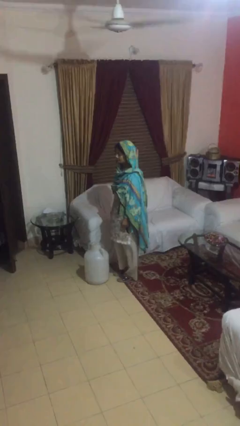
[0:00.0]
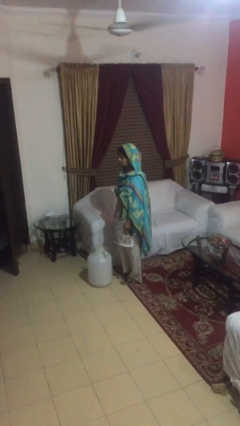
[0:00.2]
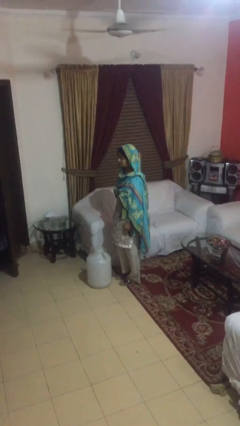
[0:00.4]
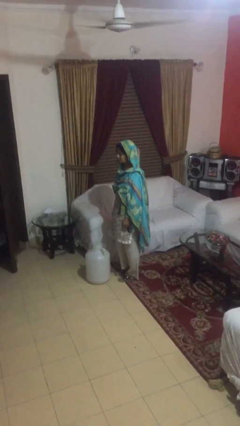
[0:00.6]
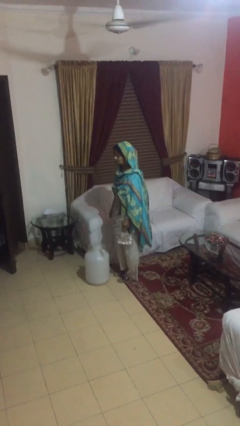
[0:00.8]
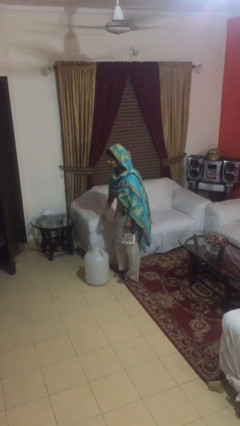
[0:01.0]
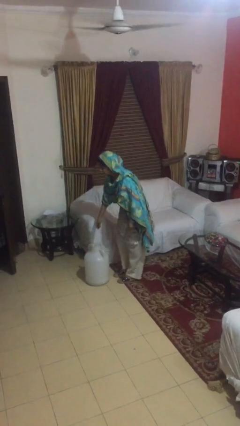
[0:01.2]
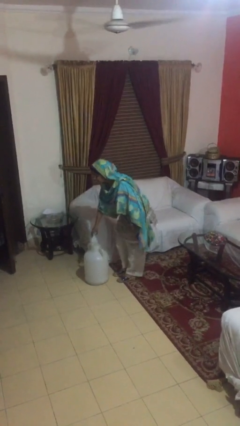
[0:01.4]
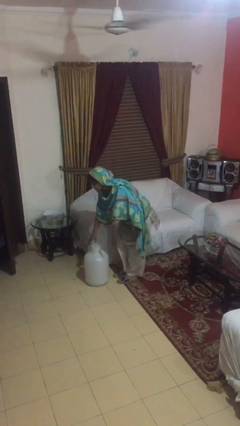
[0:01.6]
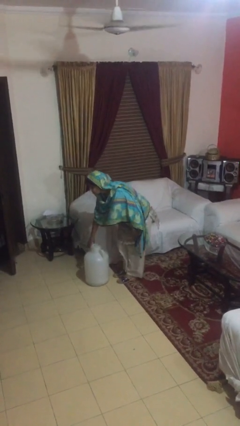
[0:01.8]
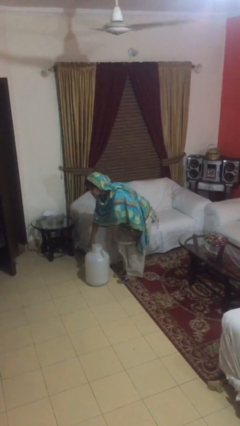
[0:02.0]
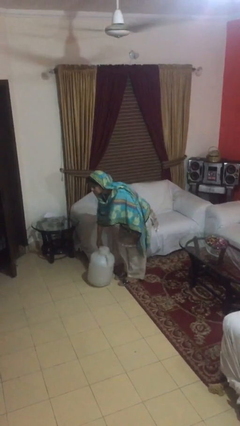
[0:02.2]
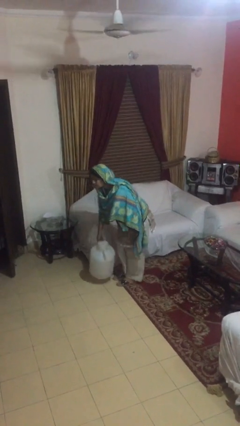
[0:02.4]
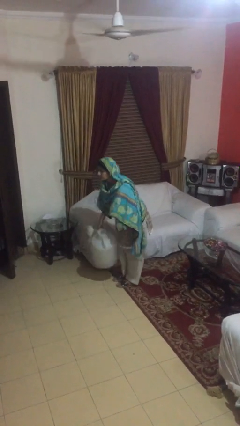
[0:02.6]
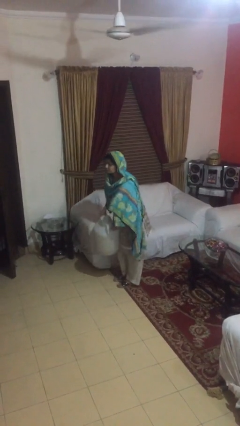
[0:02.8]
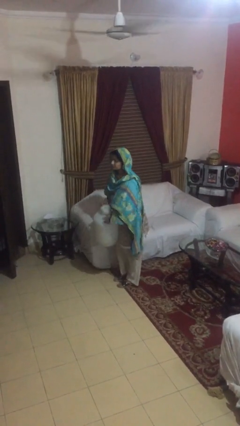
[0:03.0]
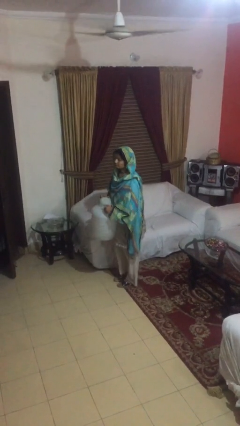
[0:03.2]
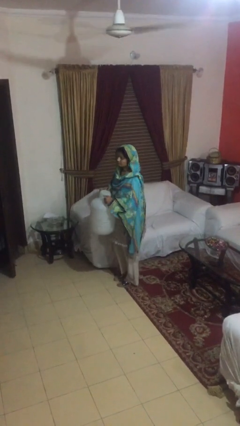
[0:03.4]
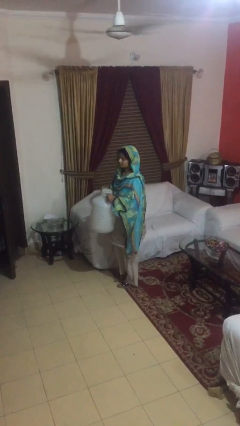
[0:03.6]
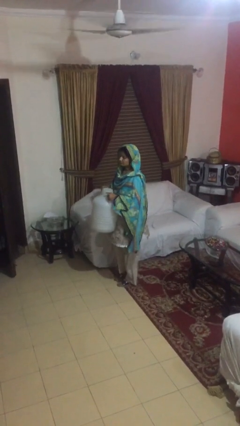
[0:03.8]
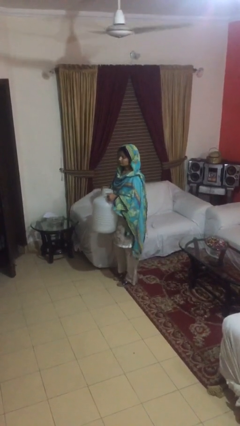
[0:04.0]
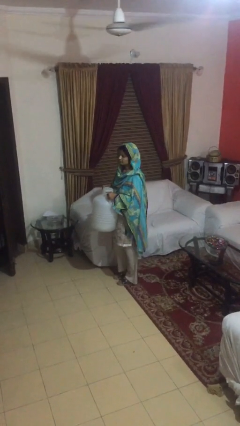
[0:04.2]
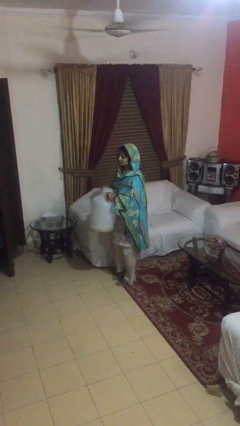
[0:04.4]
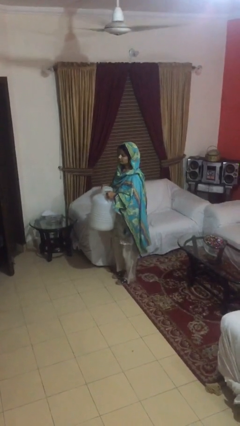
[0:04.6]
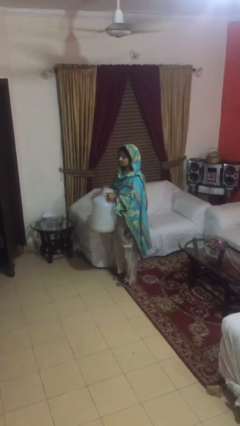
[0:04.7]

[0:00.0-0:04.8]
person carries heavy object

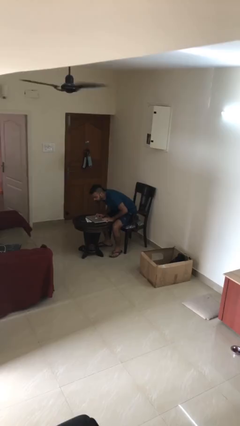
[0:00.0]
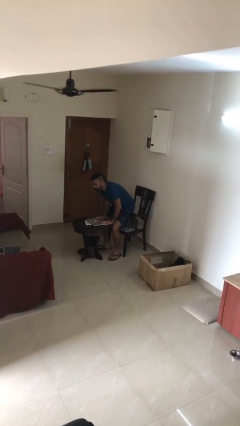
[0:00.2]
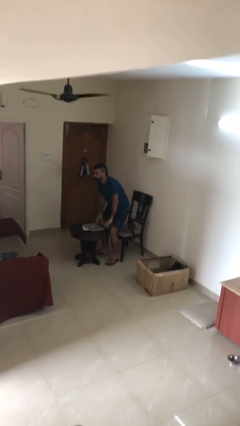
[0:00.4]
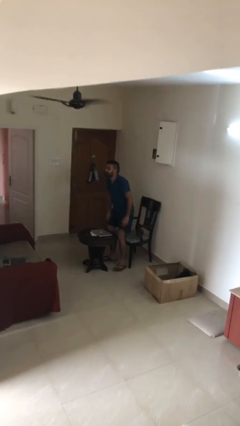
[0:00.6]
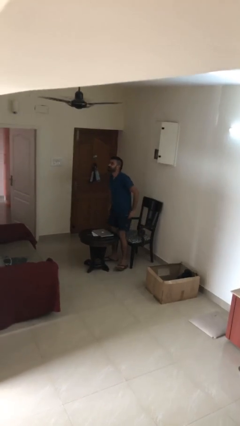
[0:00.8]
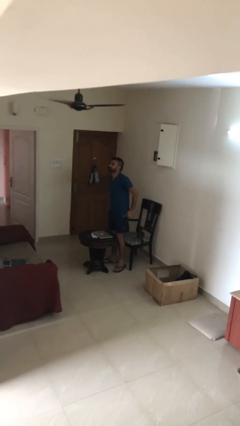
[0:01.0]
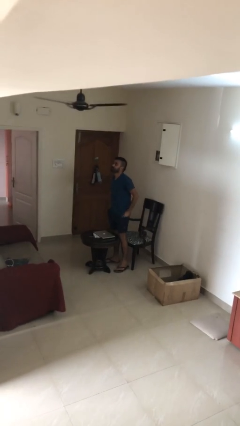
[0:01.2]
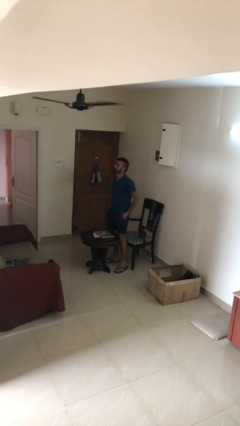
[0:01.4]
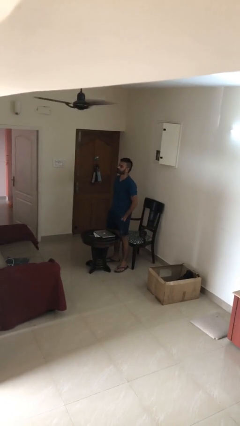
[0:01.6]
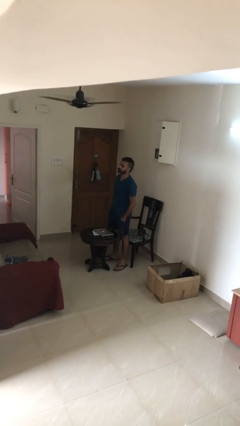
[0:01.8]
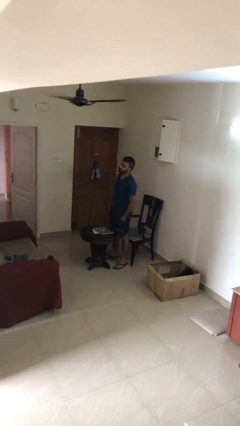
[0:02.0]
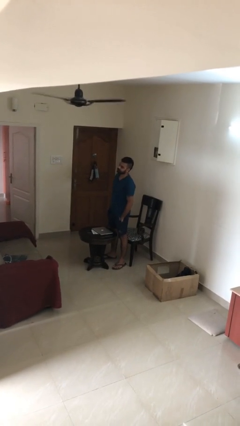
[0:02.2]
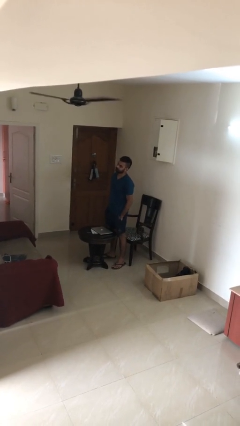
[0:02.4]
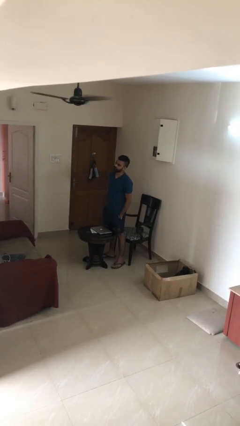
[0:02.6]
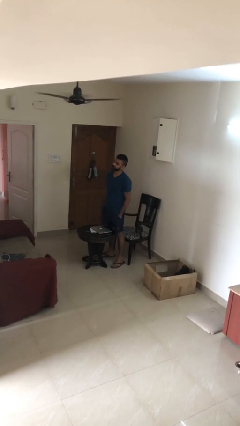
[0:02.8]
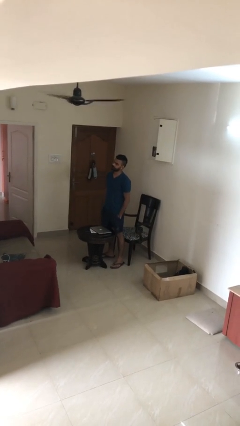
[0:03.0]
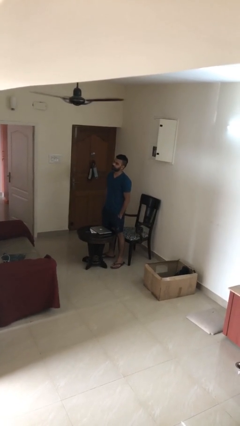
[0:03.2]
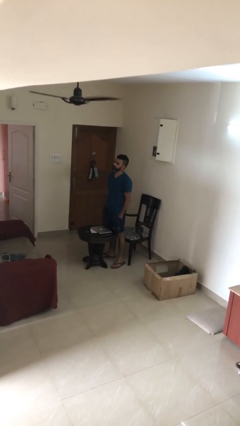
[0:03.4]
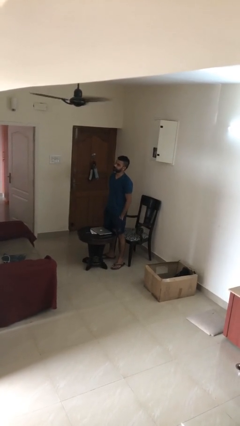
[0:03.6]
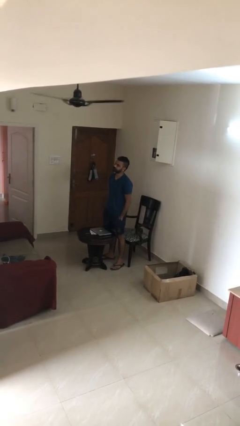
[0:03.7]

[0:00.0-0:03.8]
person stands up

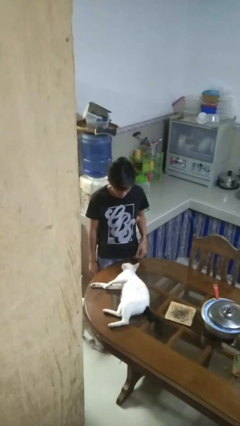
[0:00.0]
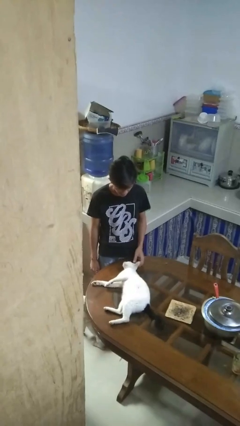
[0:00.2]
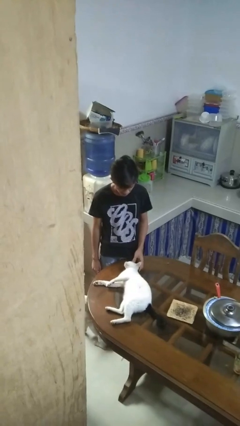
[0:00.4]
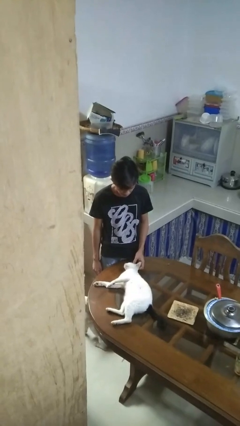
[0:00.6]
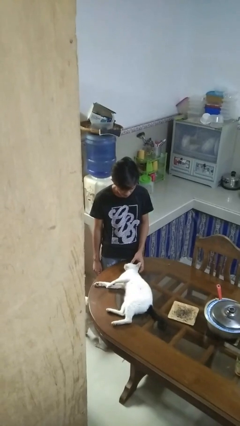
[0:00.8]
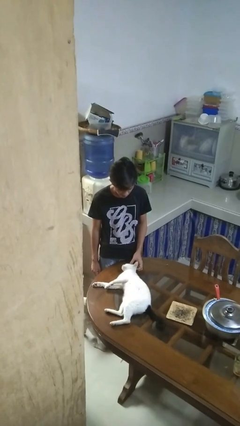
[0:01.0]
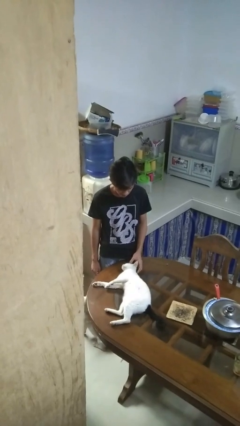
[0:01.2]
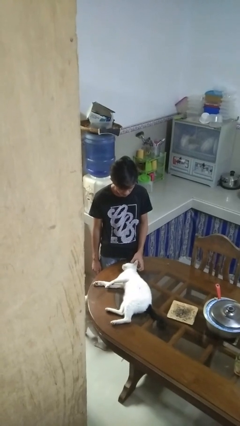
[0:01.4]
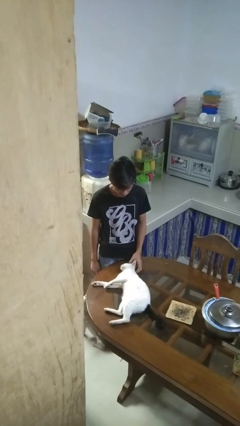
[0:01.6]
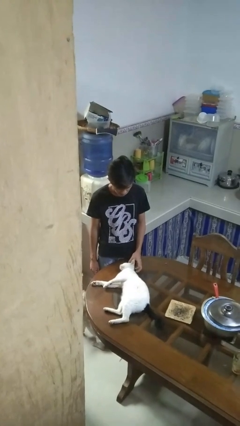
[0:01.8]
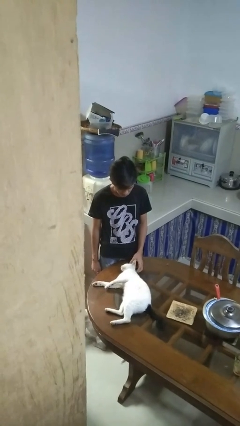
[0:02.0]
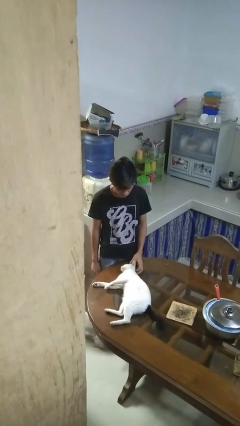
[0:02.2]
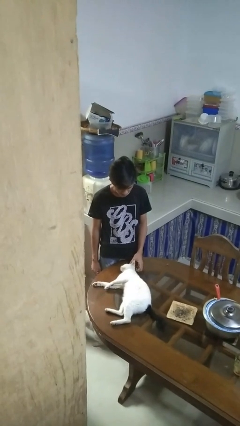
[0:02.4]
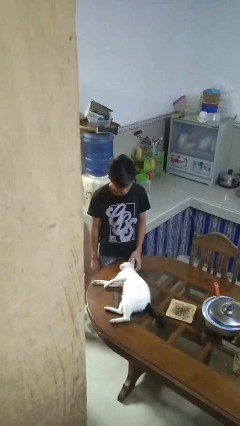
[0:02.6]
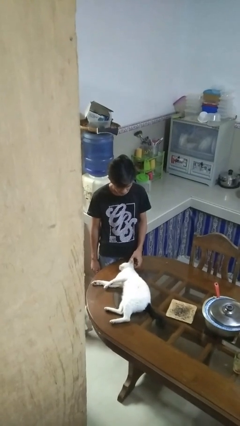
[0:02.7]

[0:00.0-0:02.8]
person pets cat

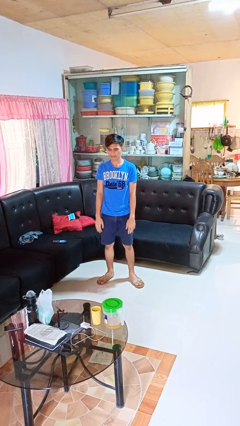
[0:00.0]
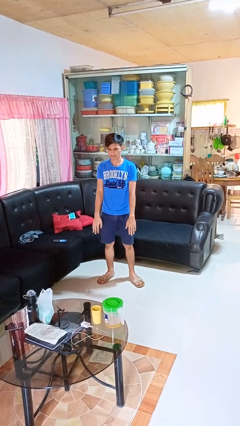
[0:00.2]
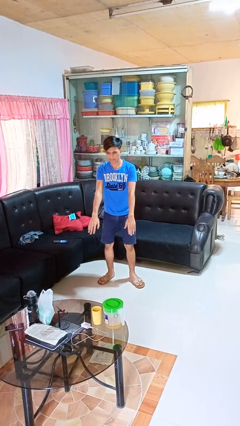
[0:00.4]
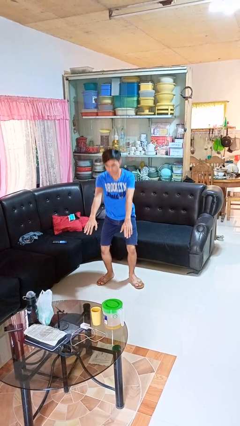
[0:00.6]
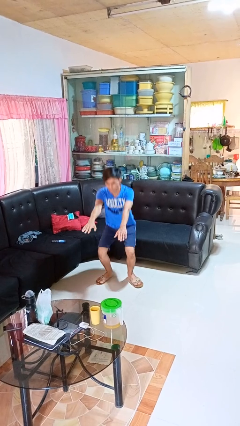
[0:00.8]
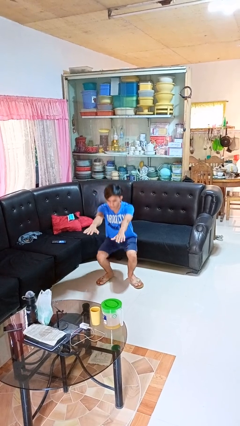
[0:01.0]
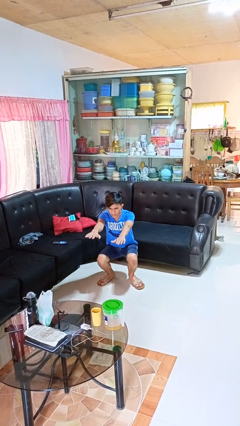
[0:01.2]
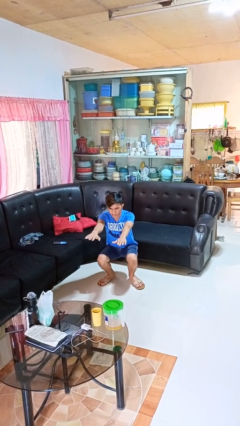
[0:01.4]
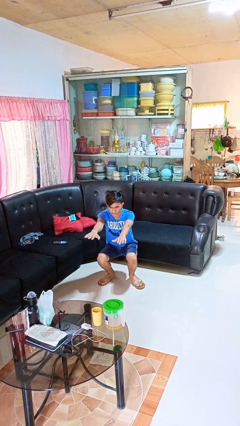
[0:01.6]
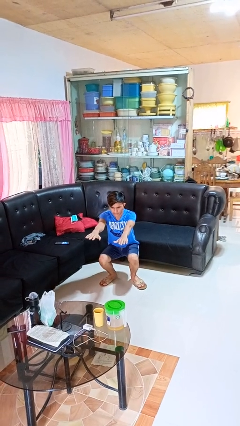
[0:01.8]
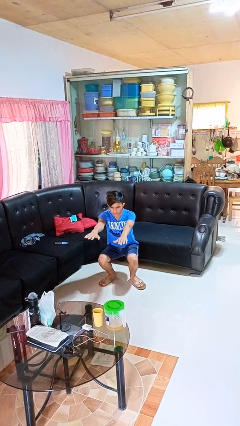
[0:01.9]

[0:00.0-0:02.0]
person squats

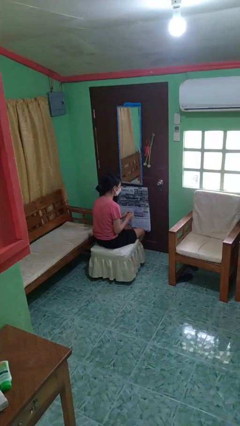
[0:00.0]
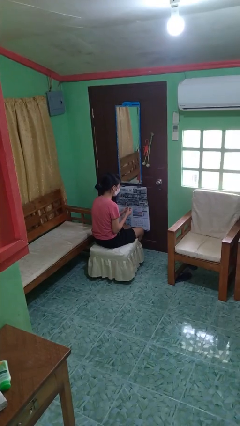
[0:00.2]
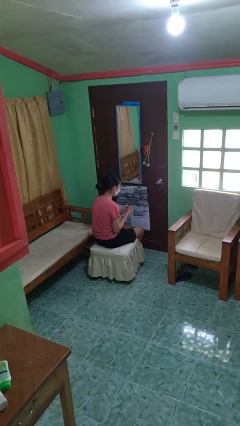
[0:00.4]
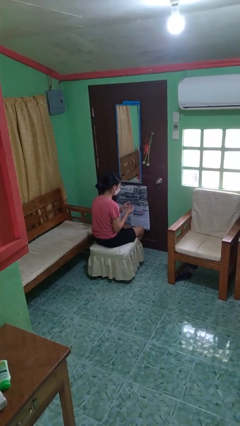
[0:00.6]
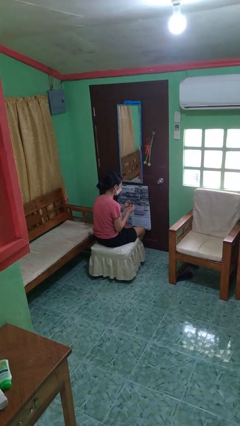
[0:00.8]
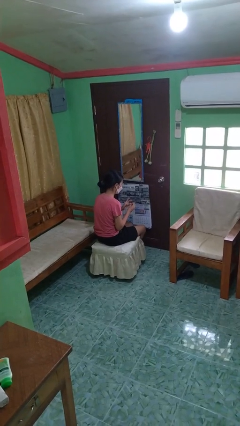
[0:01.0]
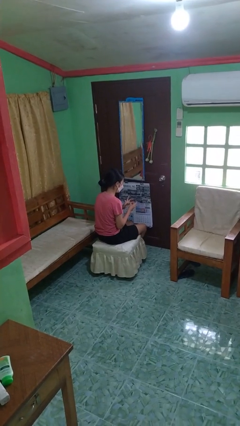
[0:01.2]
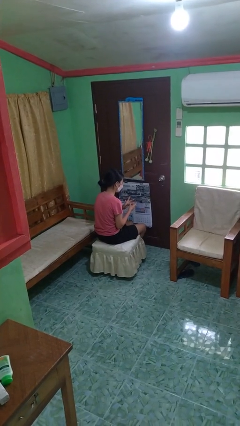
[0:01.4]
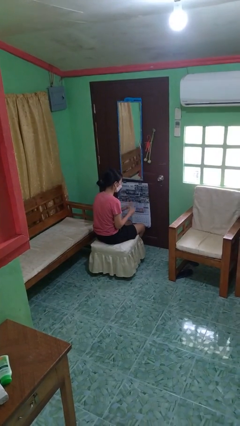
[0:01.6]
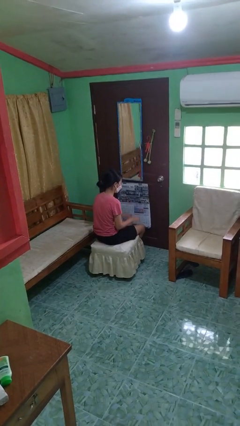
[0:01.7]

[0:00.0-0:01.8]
person puts on ring

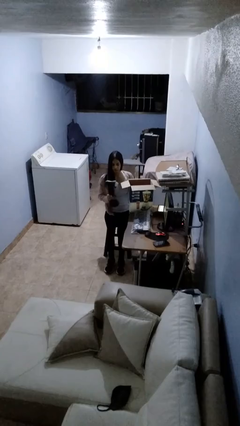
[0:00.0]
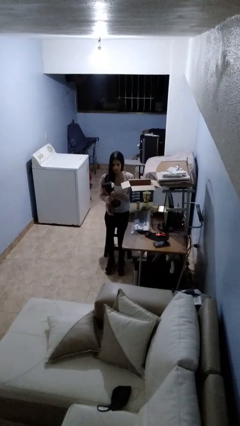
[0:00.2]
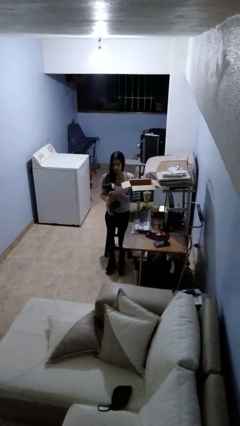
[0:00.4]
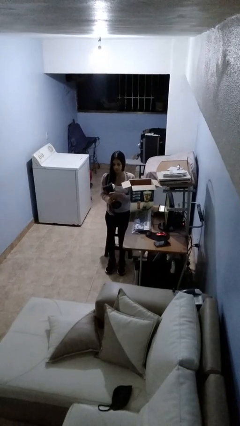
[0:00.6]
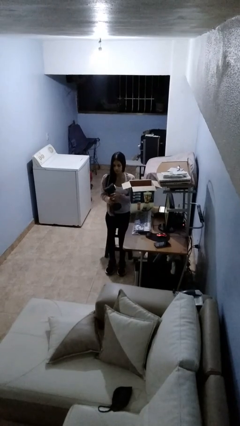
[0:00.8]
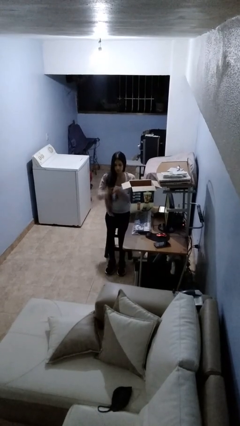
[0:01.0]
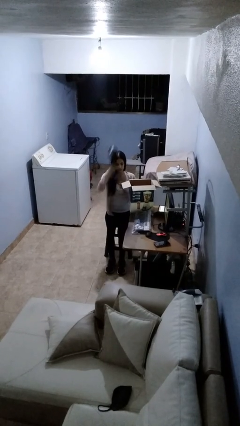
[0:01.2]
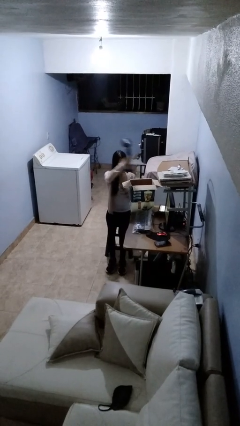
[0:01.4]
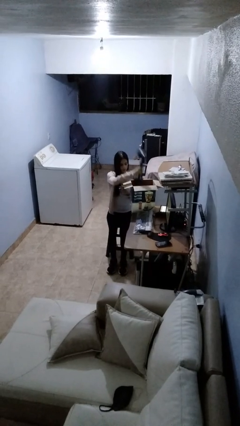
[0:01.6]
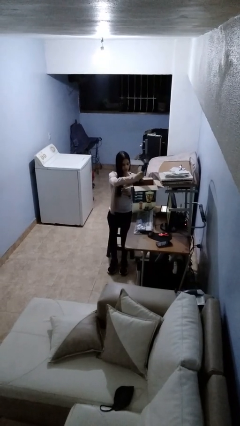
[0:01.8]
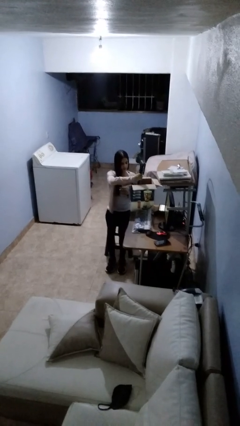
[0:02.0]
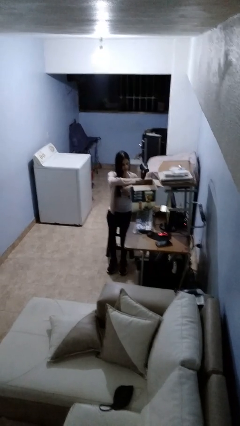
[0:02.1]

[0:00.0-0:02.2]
person puts object into box
